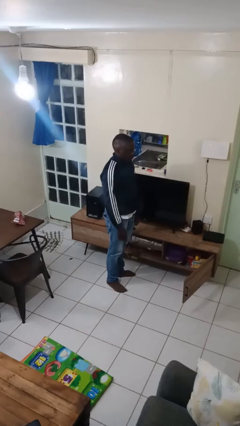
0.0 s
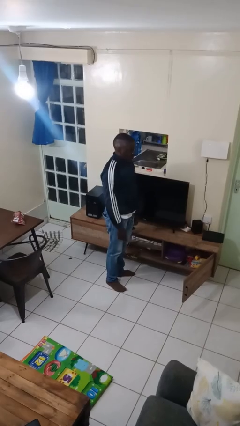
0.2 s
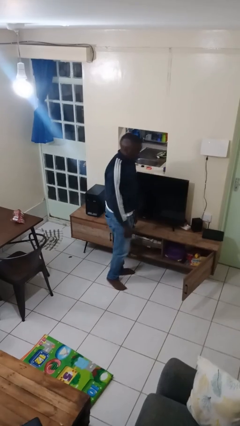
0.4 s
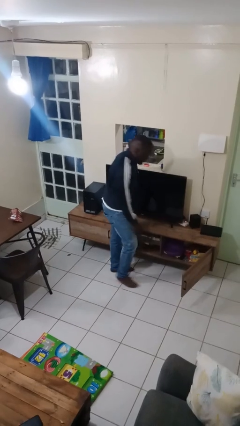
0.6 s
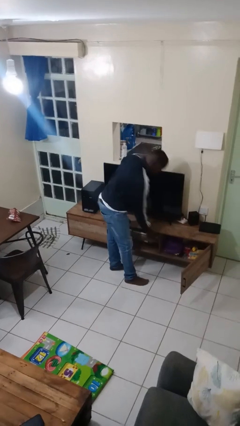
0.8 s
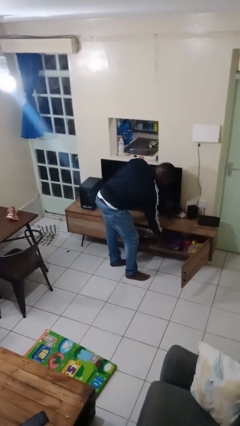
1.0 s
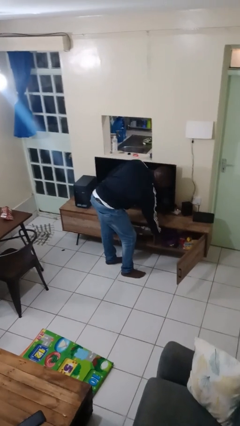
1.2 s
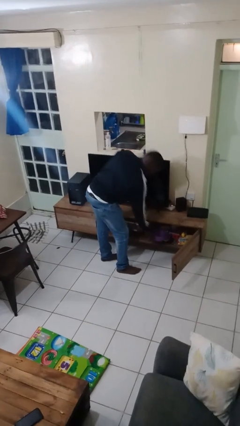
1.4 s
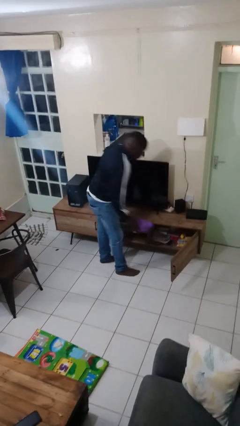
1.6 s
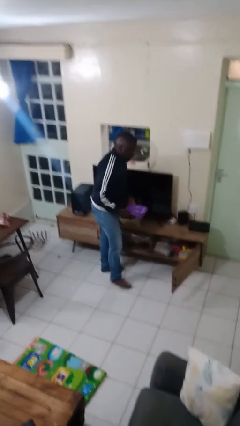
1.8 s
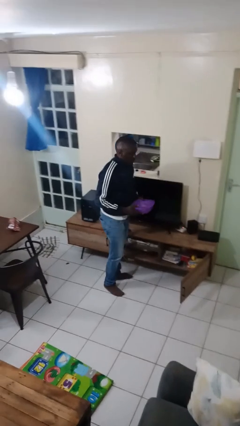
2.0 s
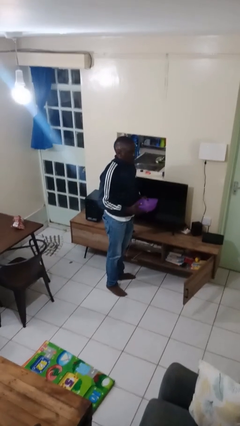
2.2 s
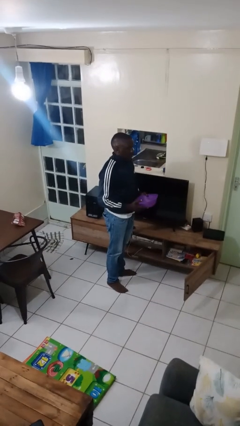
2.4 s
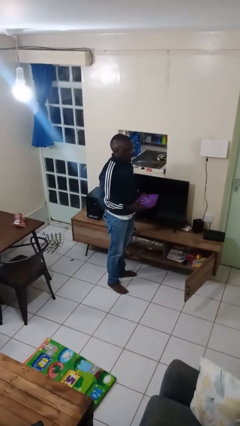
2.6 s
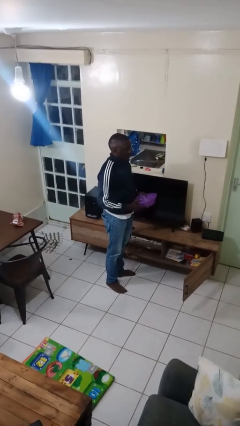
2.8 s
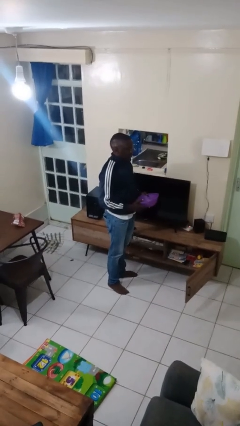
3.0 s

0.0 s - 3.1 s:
person picks up object from cabinet

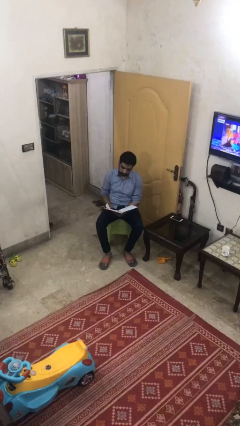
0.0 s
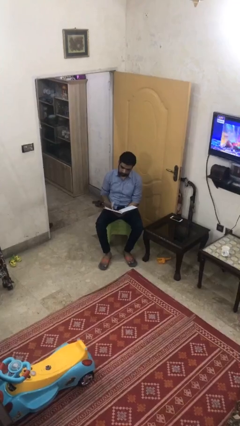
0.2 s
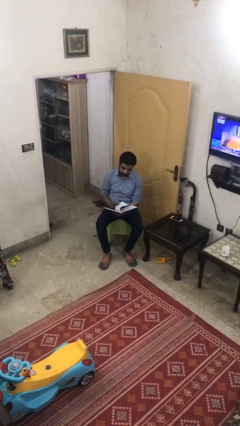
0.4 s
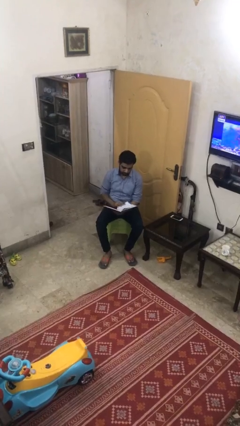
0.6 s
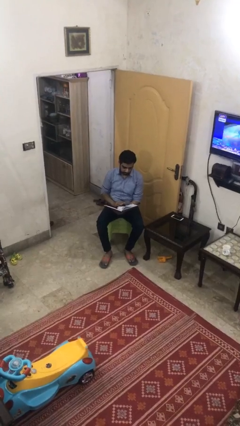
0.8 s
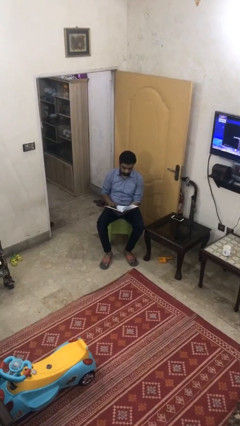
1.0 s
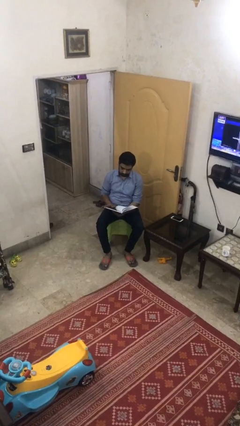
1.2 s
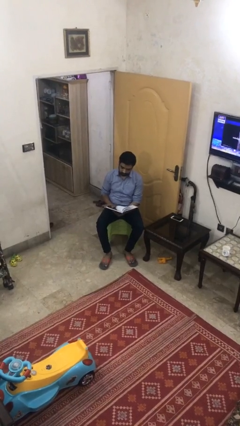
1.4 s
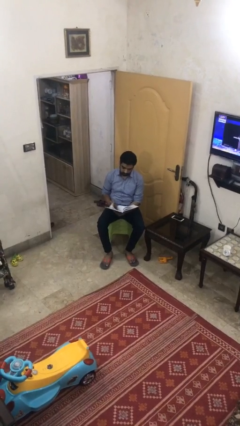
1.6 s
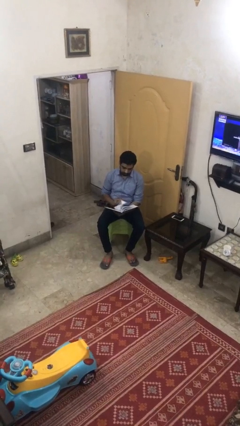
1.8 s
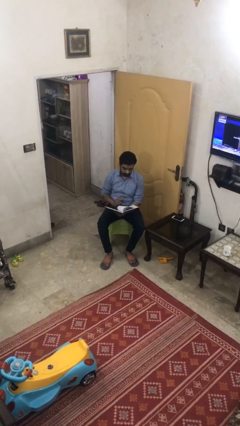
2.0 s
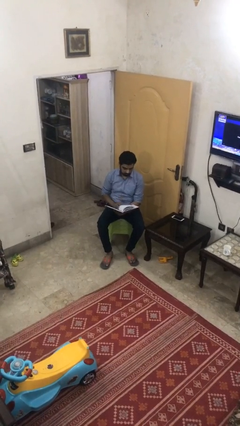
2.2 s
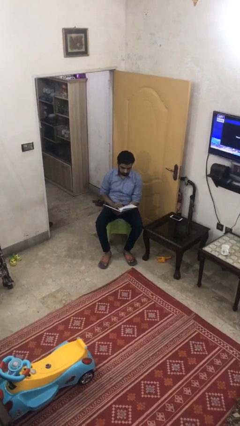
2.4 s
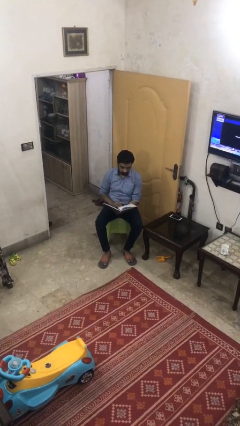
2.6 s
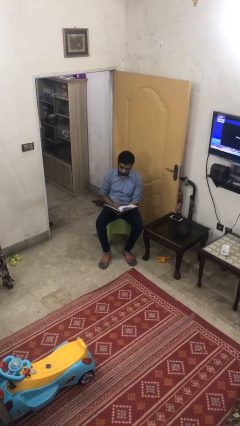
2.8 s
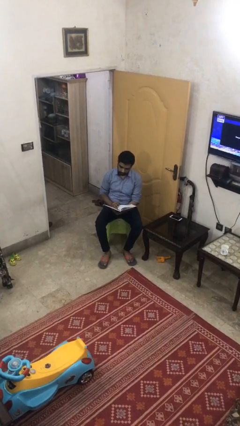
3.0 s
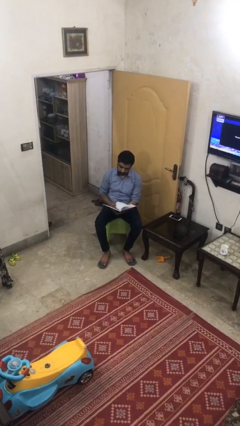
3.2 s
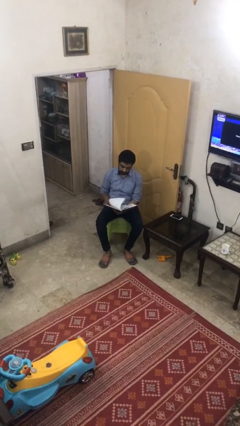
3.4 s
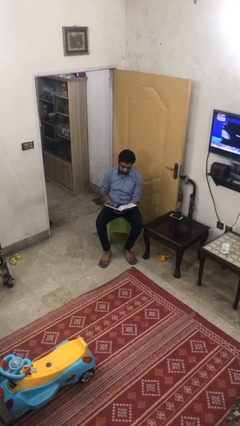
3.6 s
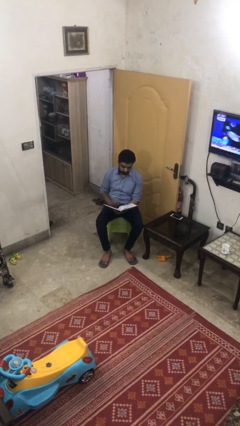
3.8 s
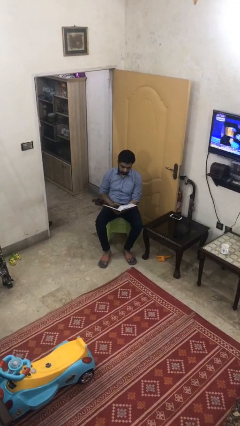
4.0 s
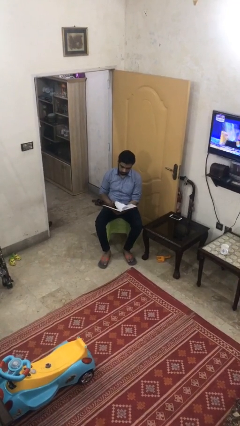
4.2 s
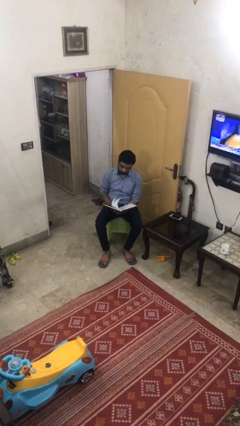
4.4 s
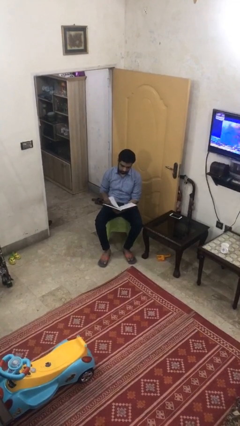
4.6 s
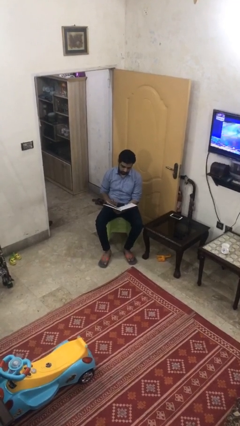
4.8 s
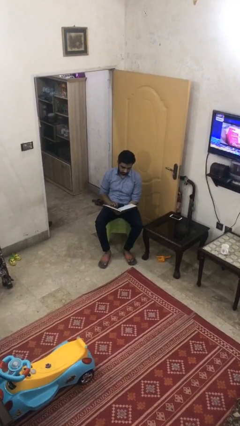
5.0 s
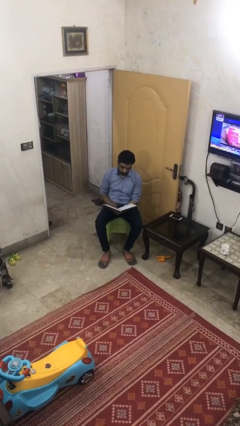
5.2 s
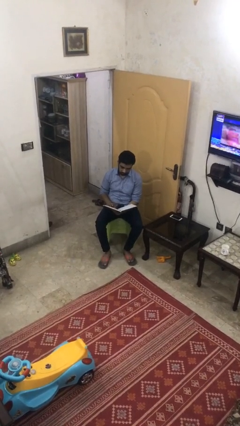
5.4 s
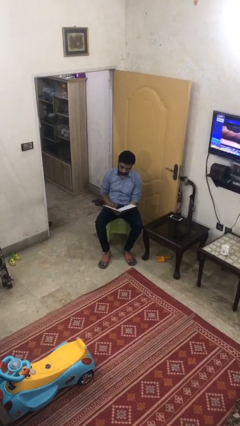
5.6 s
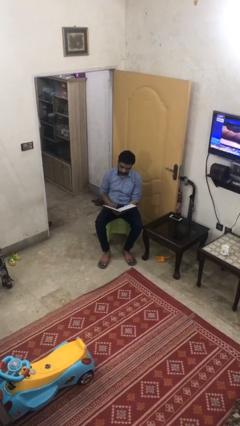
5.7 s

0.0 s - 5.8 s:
person reads document

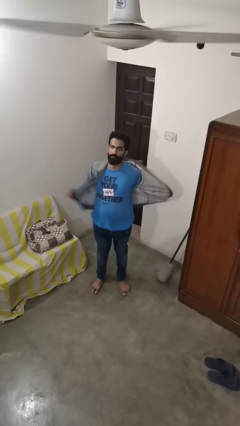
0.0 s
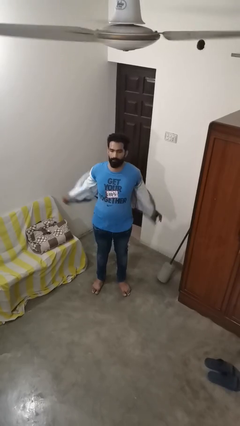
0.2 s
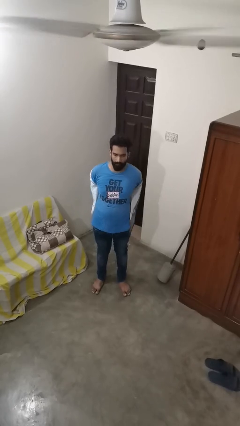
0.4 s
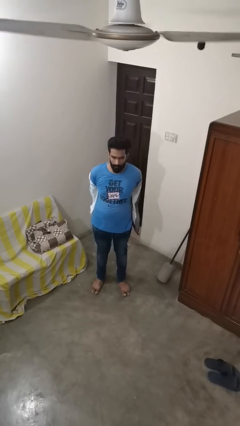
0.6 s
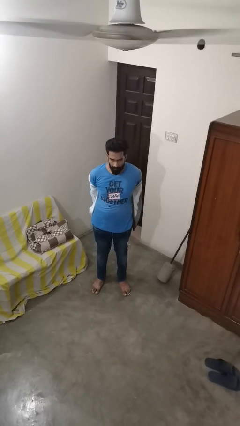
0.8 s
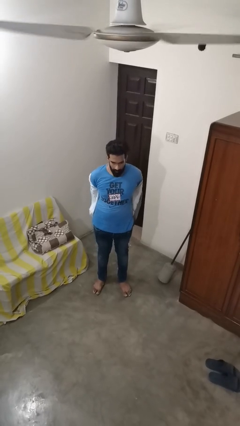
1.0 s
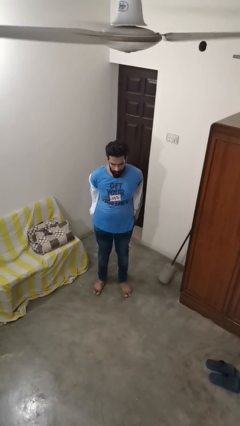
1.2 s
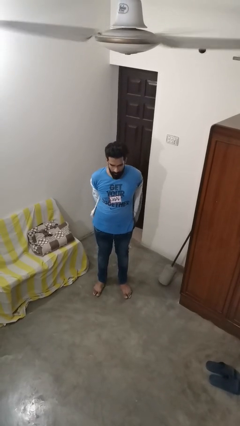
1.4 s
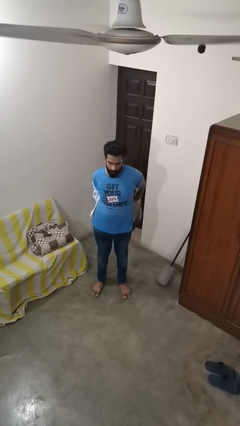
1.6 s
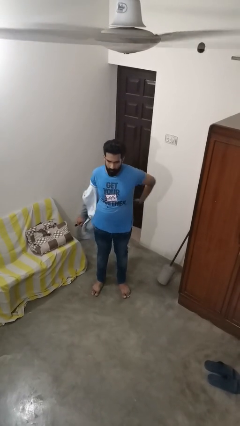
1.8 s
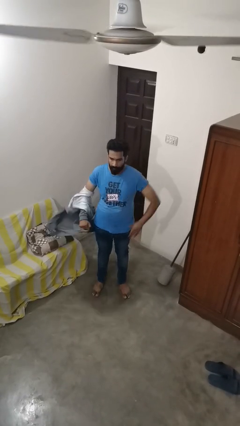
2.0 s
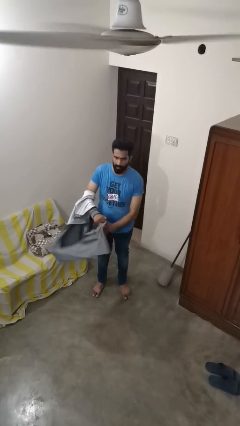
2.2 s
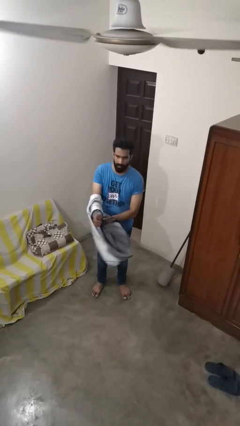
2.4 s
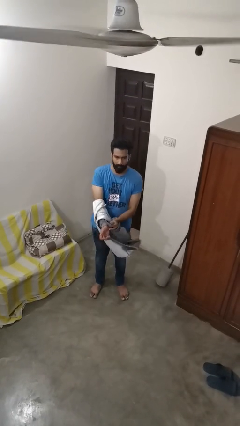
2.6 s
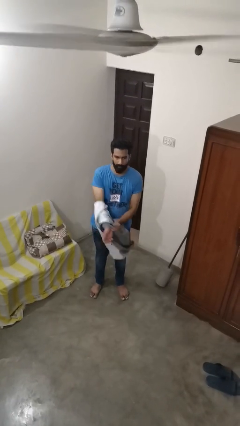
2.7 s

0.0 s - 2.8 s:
person takes off jacket

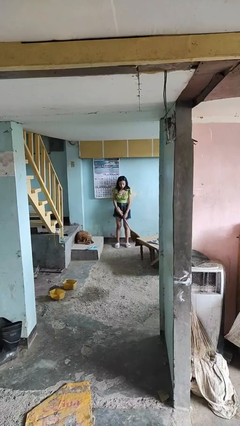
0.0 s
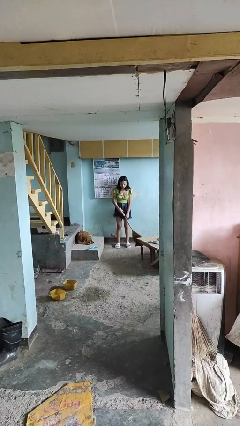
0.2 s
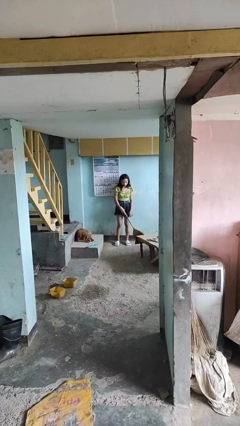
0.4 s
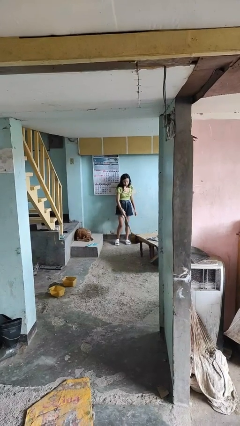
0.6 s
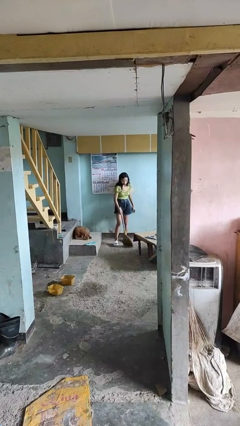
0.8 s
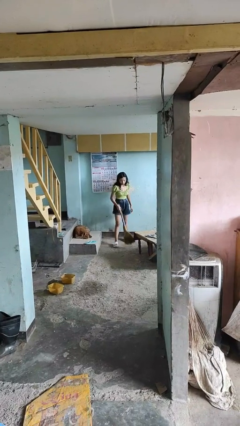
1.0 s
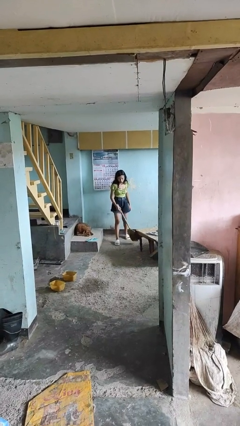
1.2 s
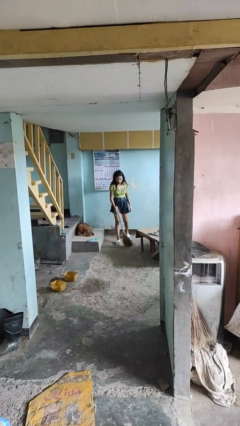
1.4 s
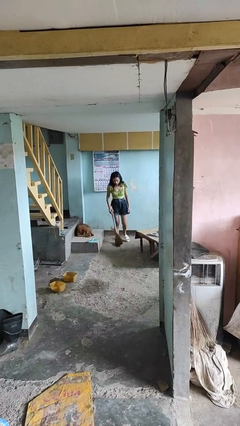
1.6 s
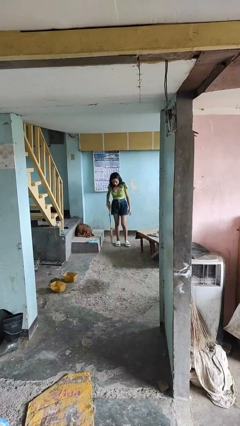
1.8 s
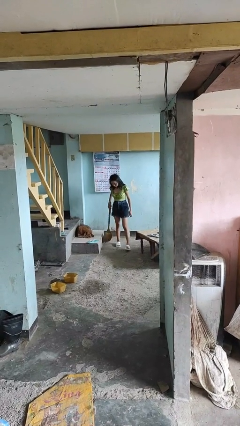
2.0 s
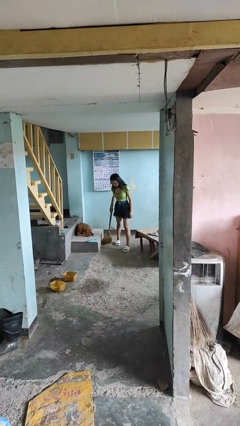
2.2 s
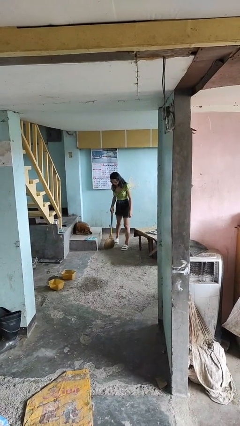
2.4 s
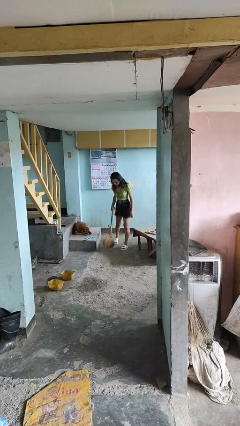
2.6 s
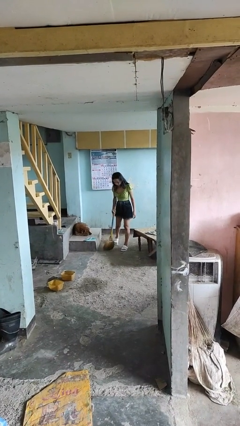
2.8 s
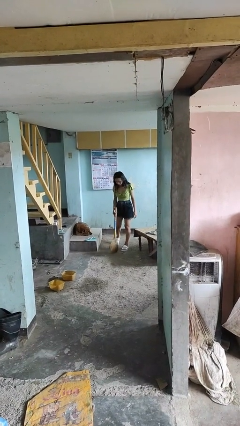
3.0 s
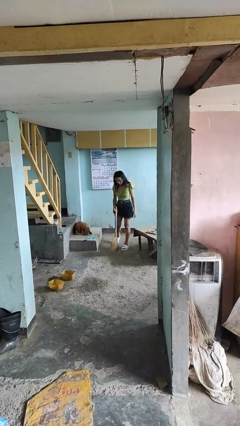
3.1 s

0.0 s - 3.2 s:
person sweeps floor

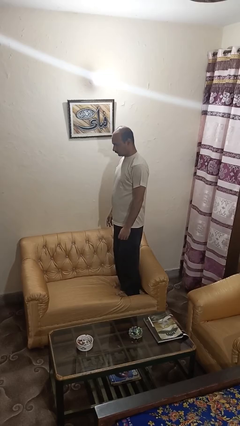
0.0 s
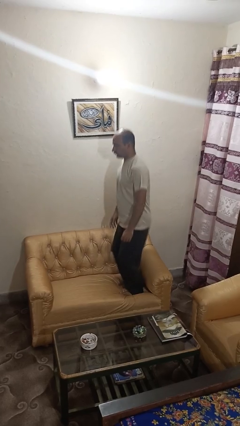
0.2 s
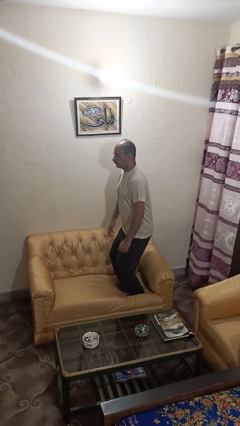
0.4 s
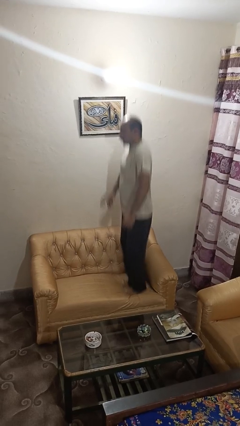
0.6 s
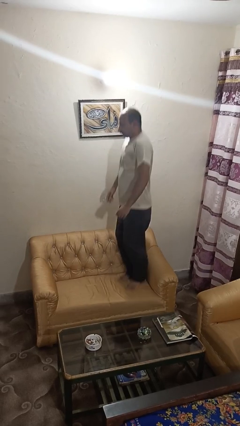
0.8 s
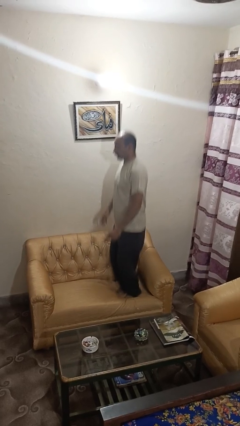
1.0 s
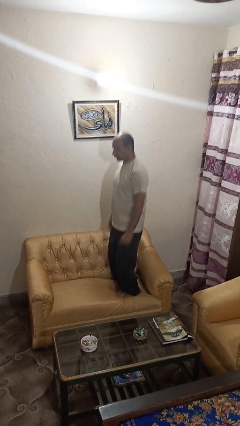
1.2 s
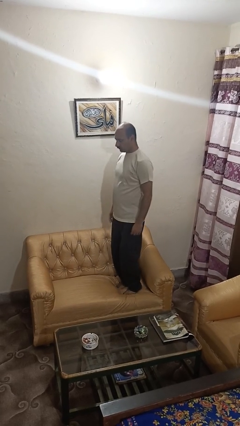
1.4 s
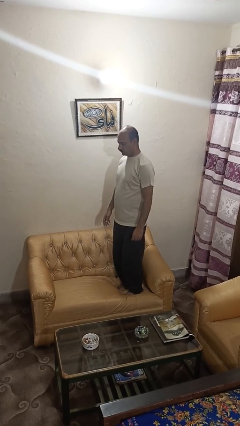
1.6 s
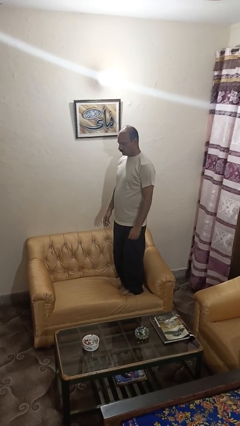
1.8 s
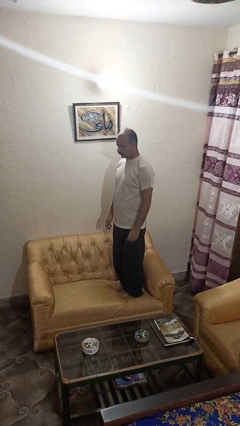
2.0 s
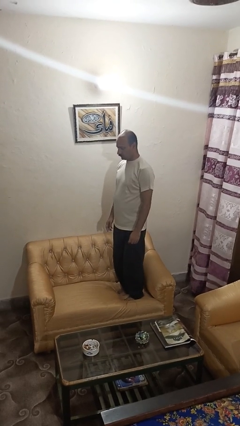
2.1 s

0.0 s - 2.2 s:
person jumps on couch

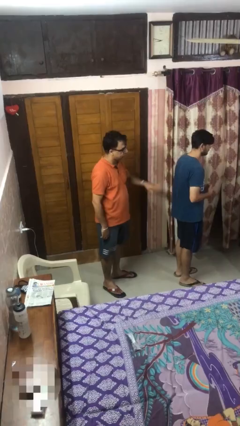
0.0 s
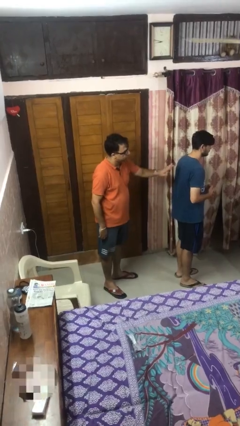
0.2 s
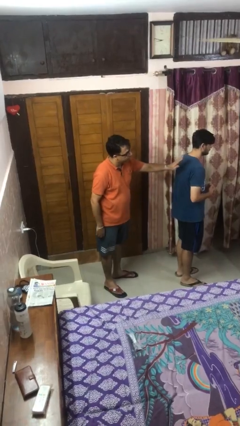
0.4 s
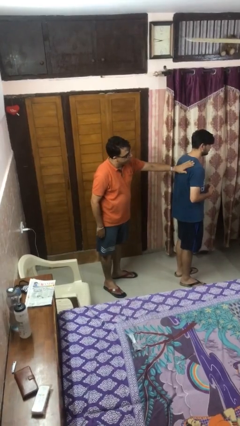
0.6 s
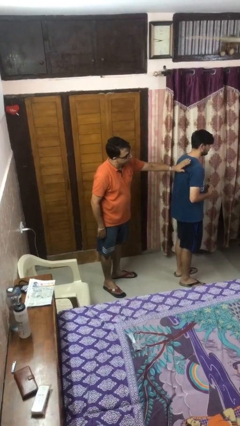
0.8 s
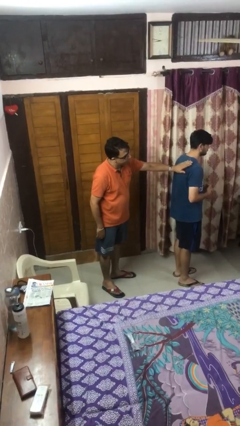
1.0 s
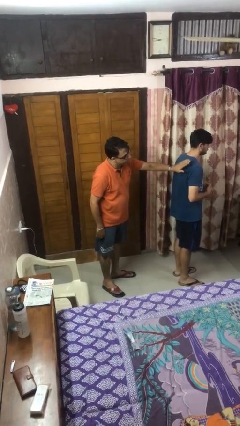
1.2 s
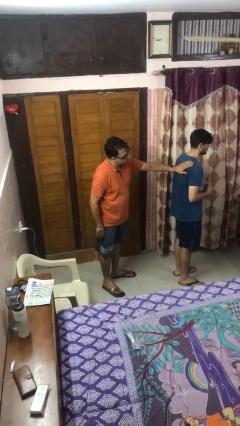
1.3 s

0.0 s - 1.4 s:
person touches back of person
